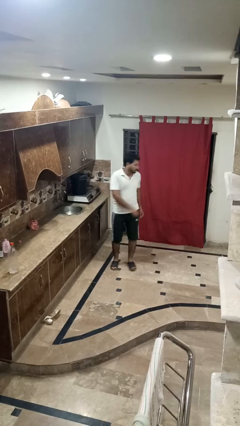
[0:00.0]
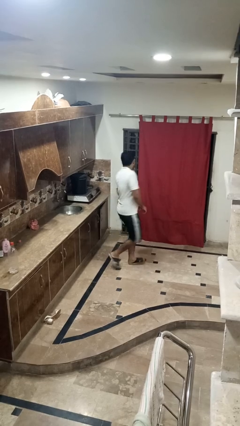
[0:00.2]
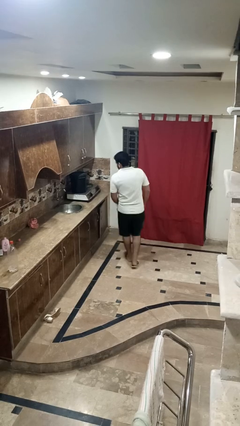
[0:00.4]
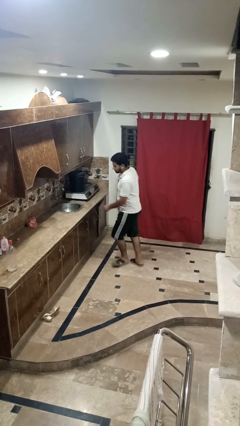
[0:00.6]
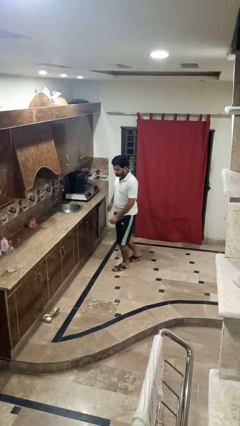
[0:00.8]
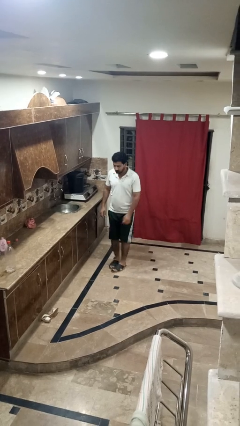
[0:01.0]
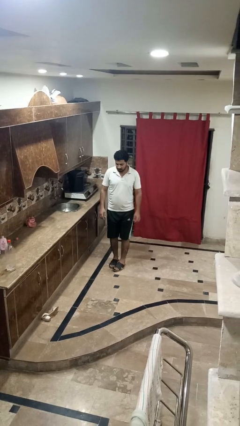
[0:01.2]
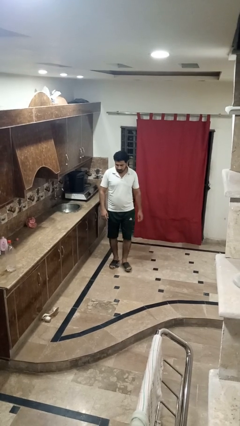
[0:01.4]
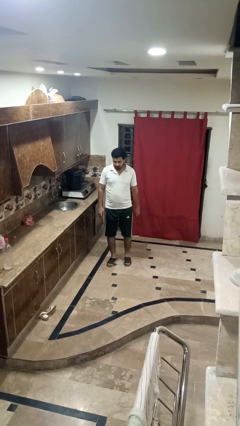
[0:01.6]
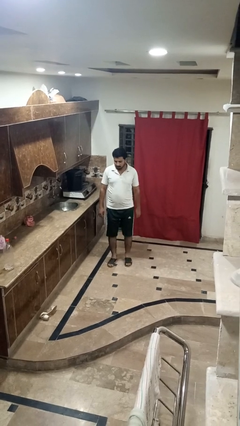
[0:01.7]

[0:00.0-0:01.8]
person twirls

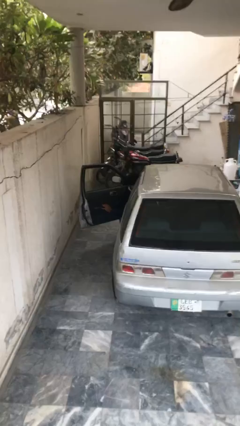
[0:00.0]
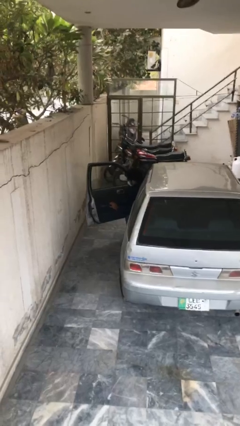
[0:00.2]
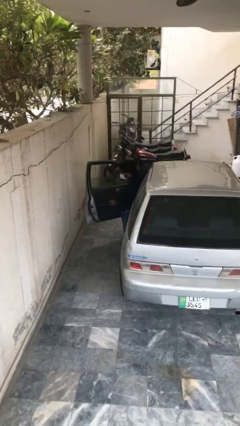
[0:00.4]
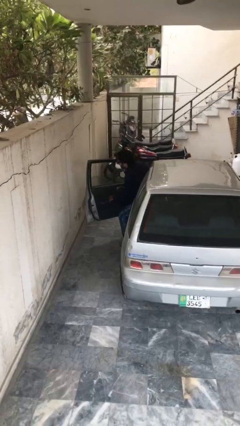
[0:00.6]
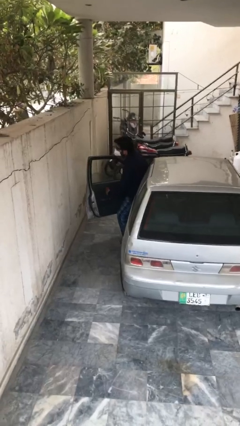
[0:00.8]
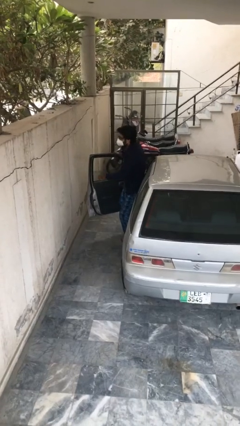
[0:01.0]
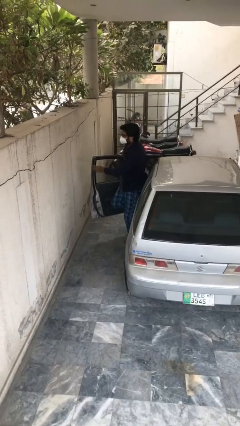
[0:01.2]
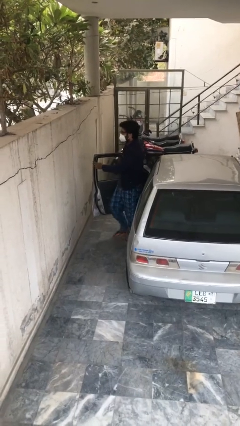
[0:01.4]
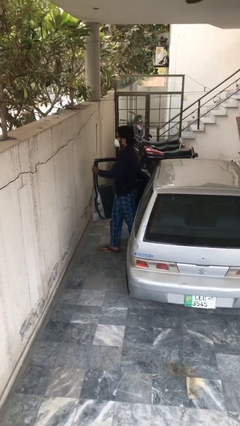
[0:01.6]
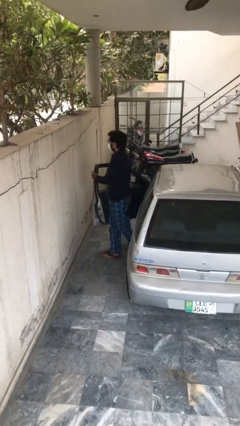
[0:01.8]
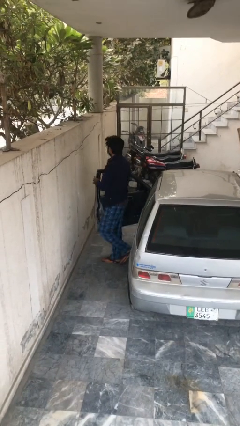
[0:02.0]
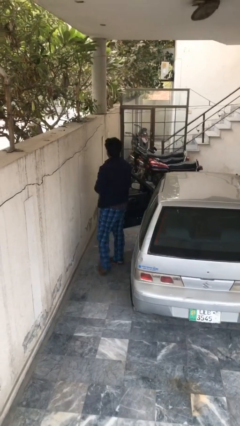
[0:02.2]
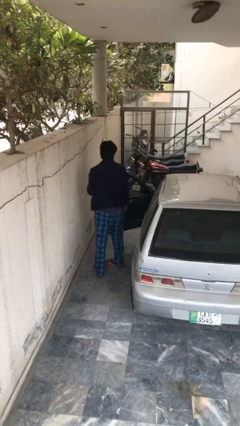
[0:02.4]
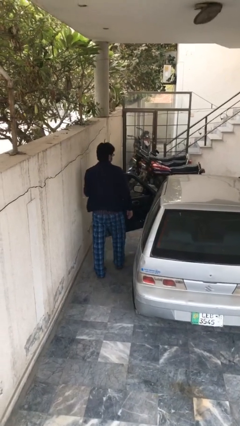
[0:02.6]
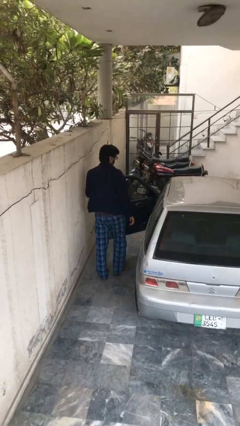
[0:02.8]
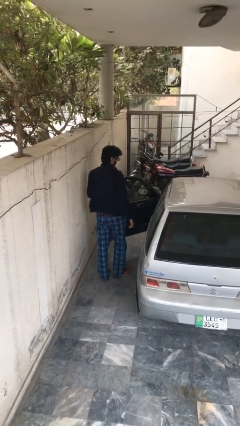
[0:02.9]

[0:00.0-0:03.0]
person exits car

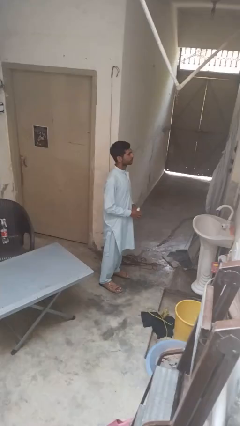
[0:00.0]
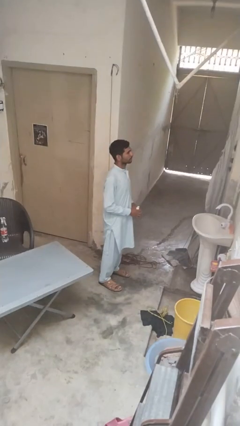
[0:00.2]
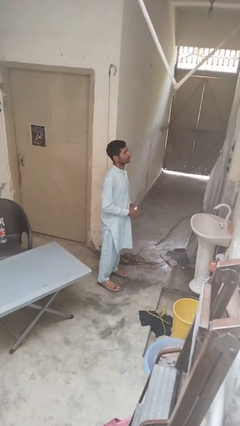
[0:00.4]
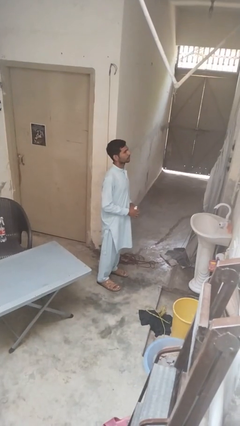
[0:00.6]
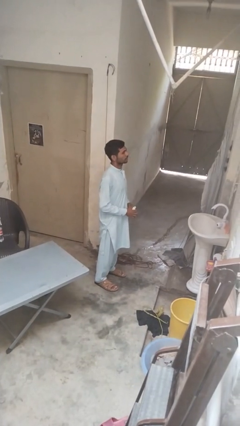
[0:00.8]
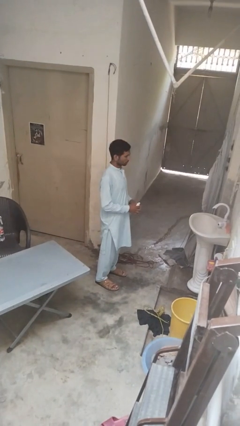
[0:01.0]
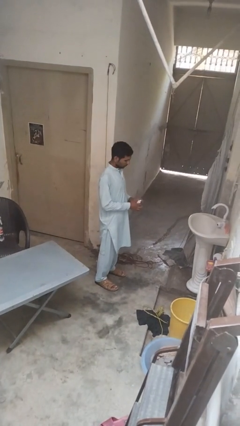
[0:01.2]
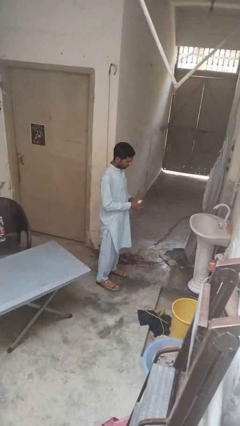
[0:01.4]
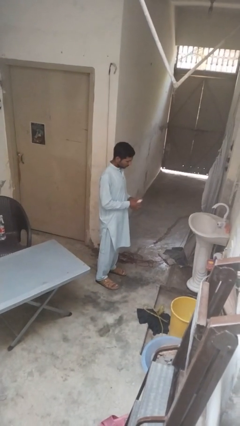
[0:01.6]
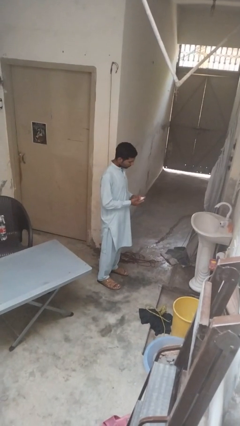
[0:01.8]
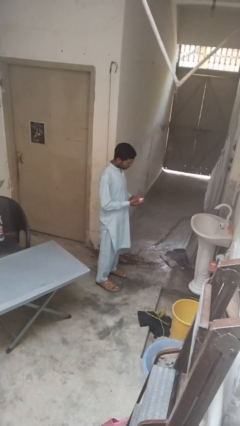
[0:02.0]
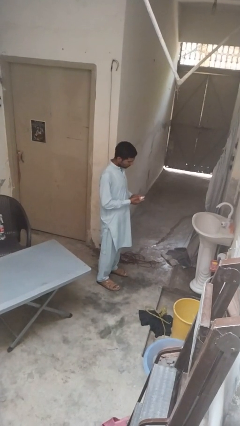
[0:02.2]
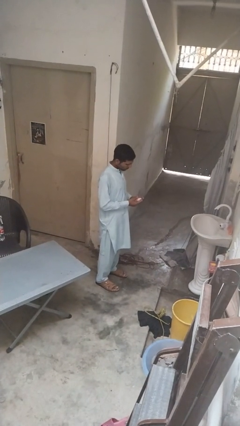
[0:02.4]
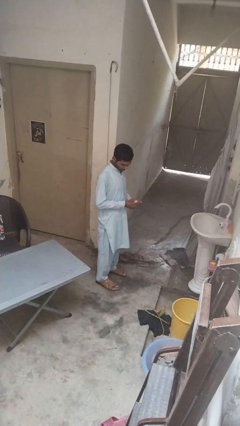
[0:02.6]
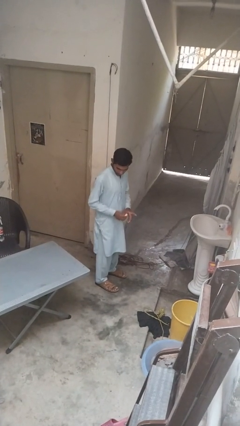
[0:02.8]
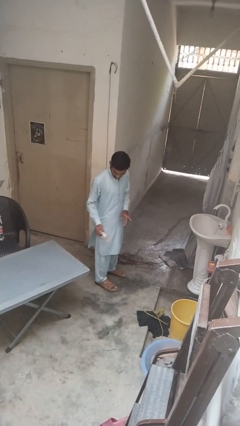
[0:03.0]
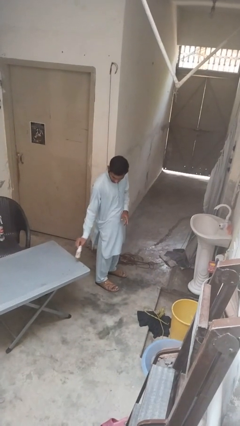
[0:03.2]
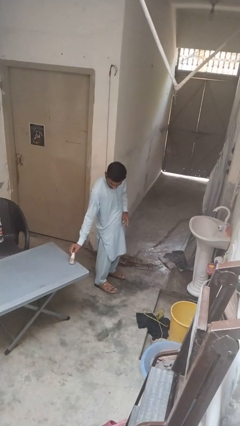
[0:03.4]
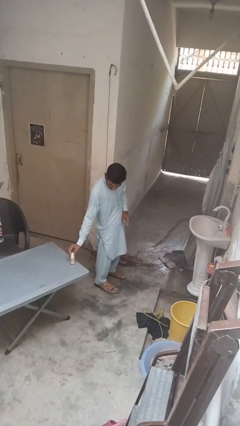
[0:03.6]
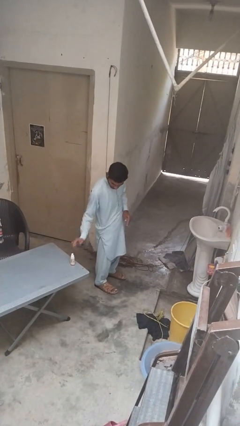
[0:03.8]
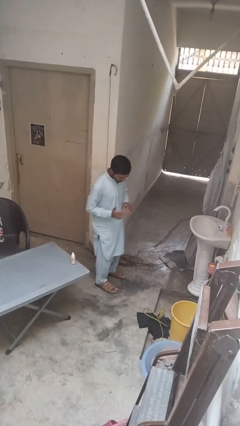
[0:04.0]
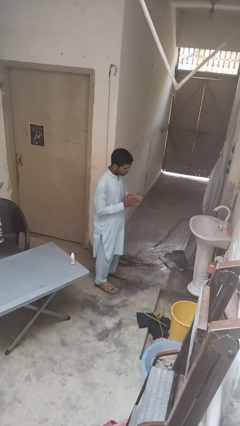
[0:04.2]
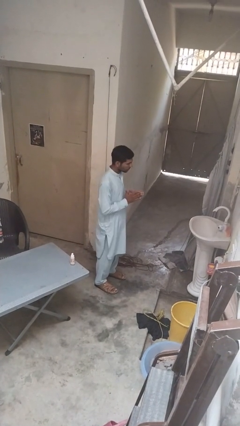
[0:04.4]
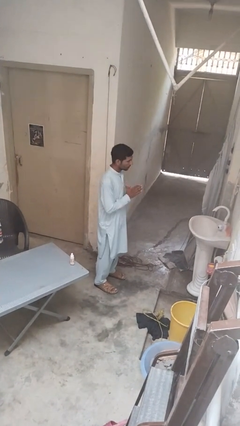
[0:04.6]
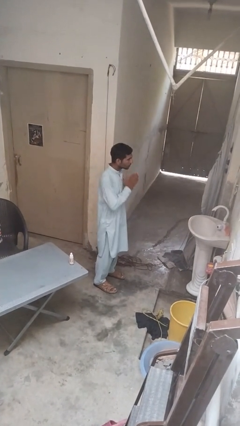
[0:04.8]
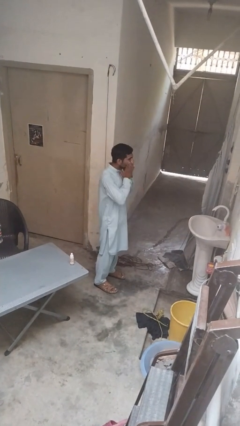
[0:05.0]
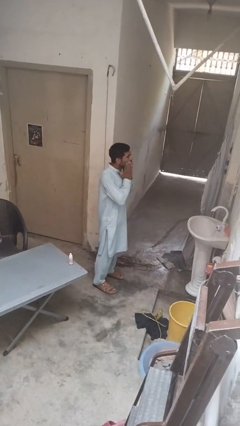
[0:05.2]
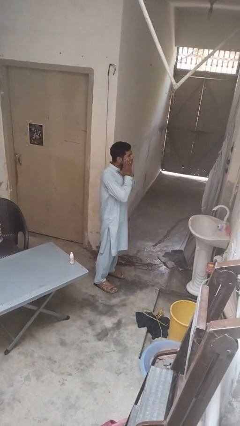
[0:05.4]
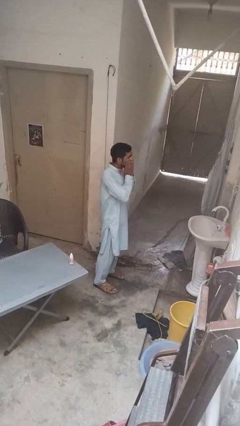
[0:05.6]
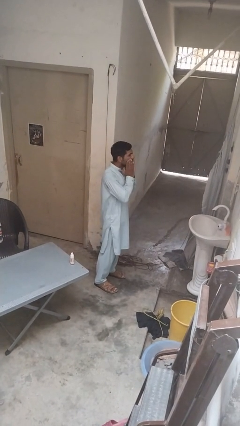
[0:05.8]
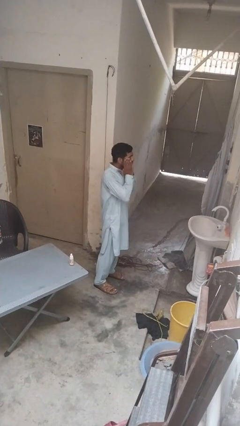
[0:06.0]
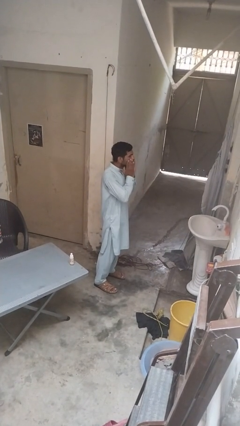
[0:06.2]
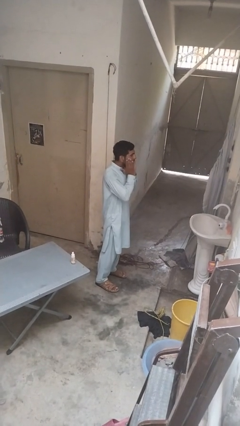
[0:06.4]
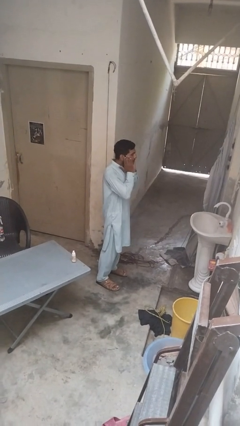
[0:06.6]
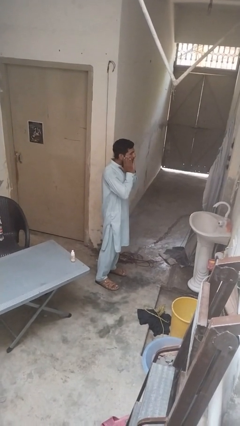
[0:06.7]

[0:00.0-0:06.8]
person applies foundation makeup

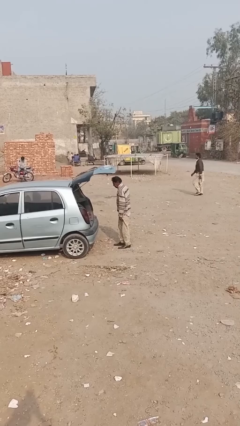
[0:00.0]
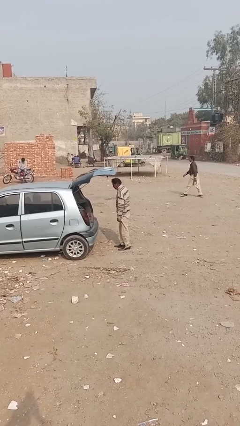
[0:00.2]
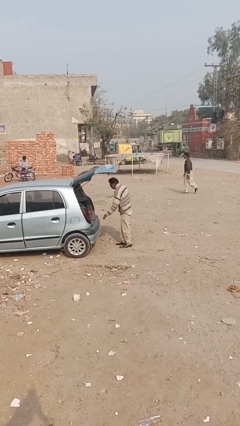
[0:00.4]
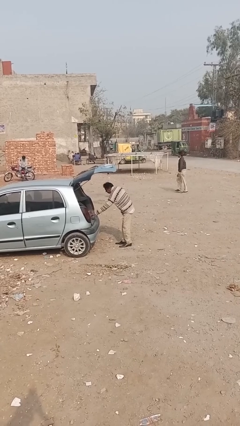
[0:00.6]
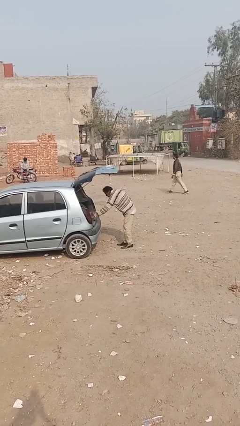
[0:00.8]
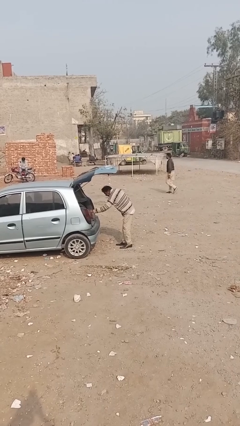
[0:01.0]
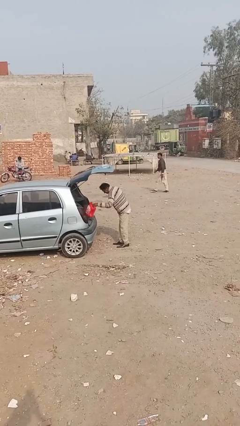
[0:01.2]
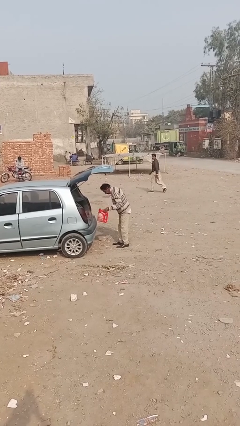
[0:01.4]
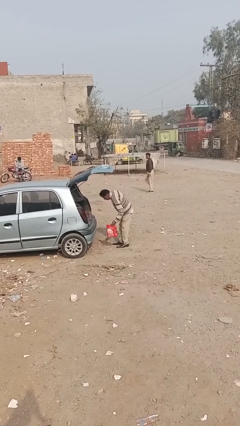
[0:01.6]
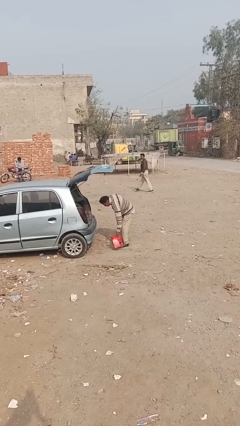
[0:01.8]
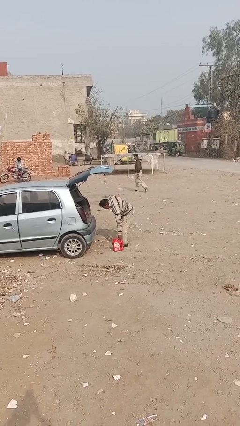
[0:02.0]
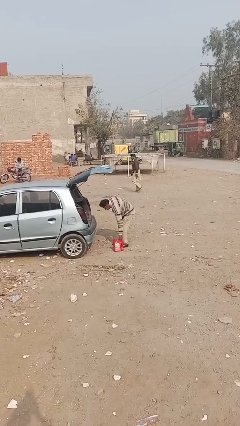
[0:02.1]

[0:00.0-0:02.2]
person unloads car

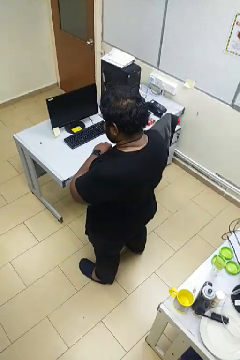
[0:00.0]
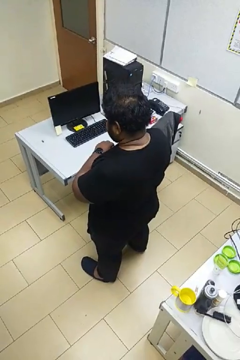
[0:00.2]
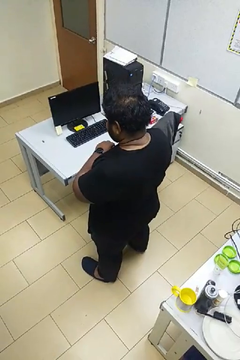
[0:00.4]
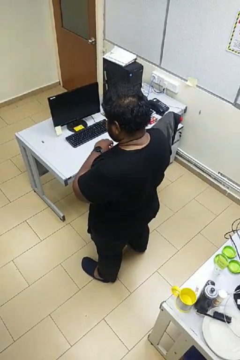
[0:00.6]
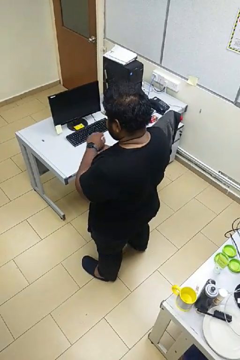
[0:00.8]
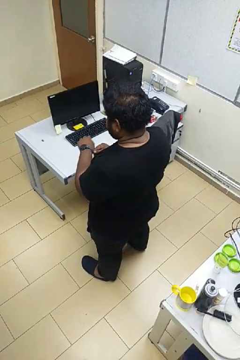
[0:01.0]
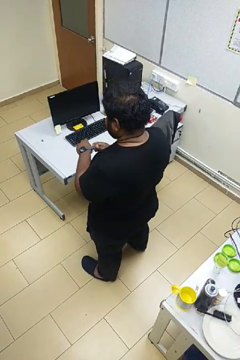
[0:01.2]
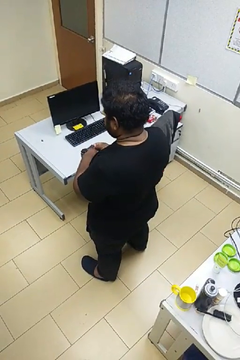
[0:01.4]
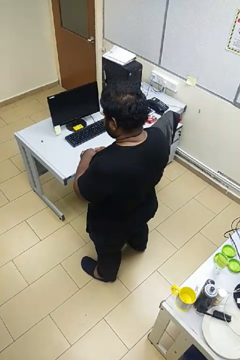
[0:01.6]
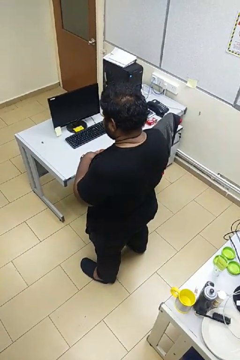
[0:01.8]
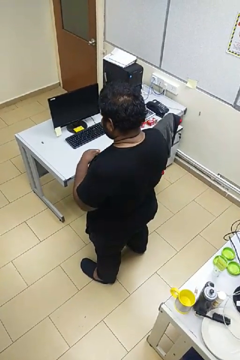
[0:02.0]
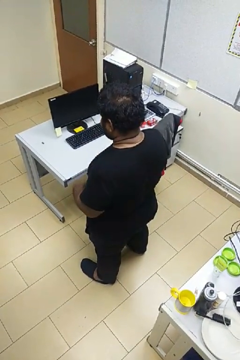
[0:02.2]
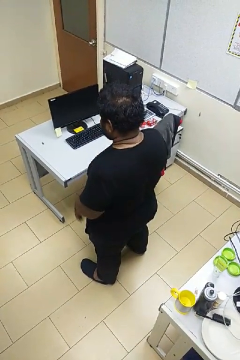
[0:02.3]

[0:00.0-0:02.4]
person takes off wristwatch

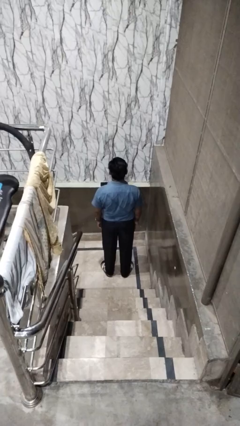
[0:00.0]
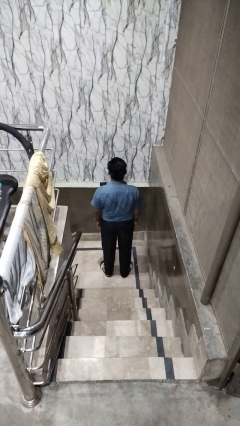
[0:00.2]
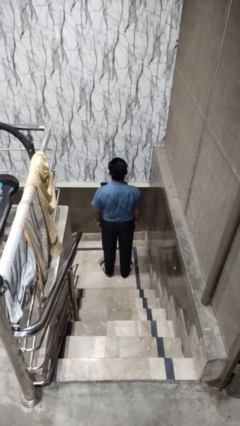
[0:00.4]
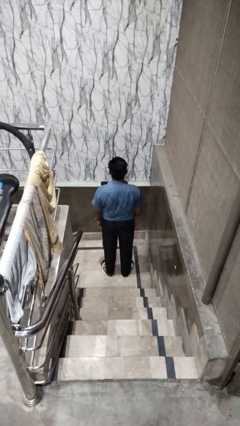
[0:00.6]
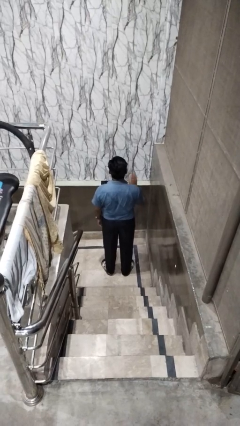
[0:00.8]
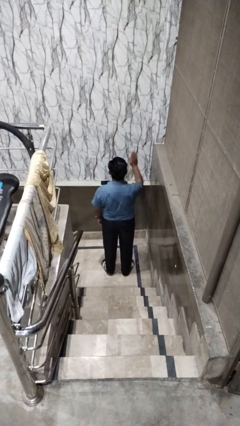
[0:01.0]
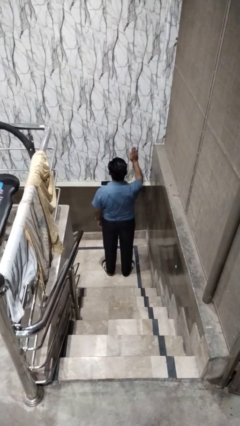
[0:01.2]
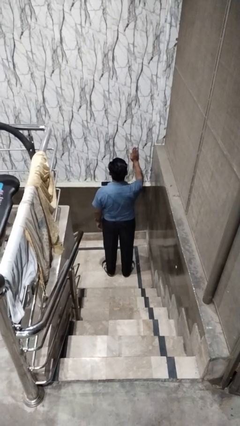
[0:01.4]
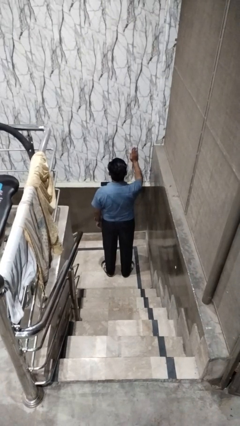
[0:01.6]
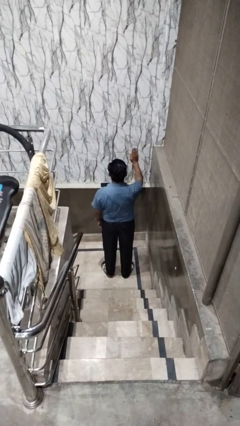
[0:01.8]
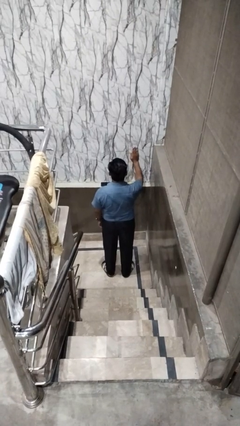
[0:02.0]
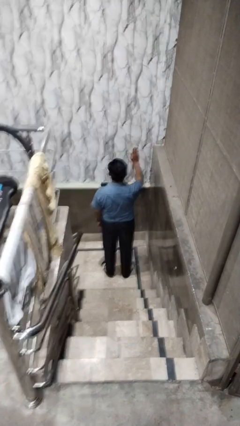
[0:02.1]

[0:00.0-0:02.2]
person gestures stop
